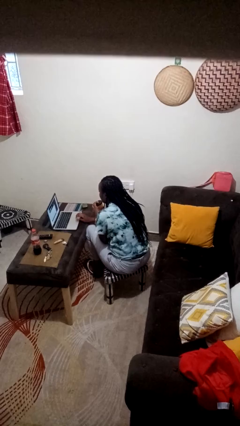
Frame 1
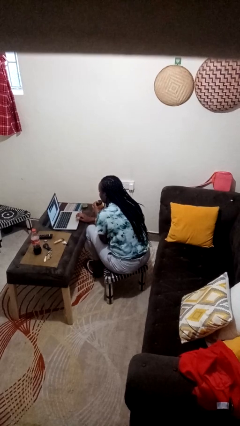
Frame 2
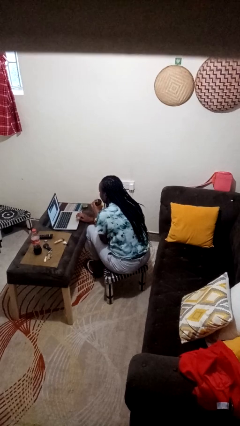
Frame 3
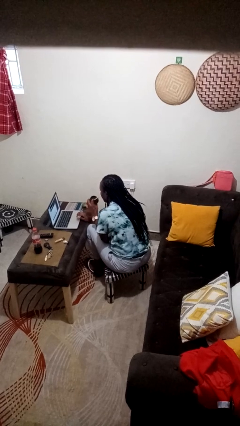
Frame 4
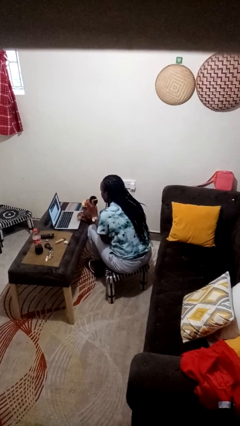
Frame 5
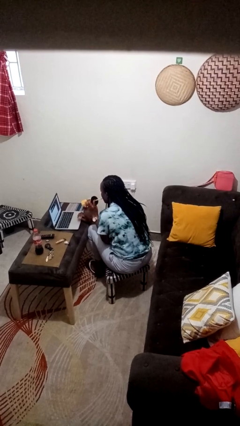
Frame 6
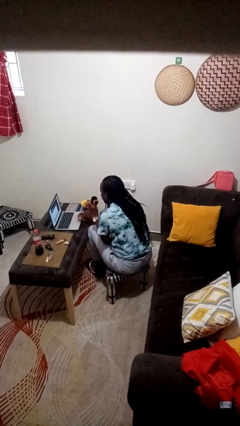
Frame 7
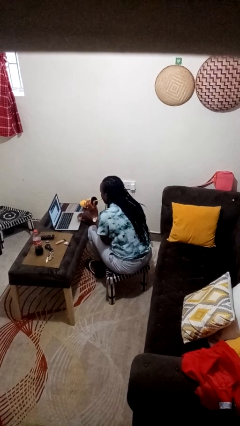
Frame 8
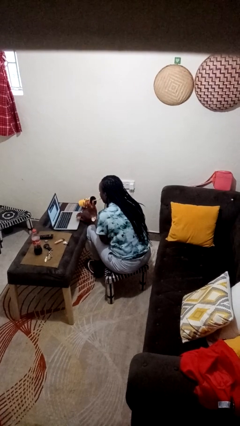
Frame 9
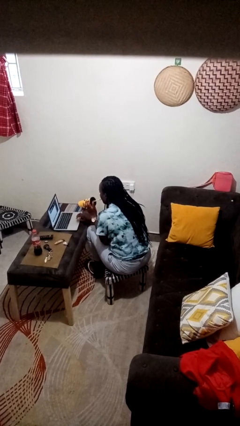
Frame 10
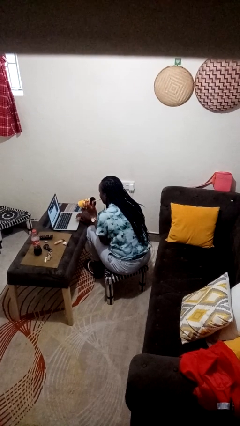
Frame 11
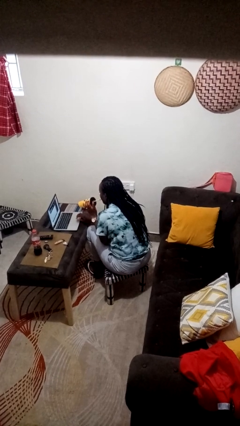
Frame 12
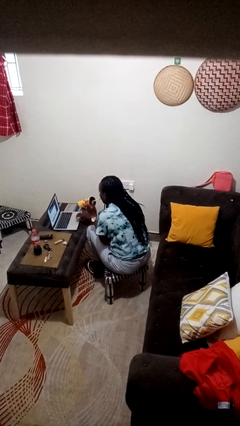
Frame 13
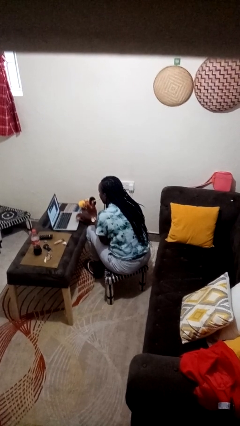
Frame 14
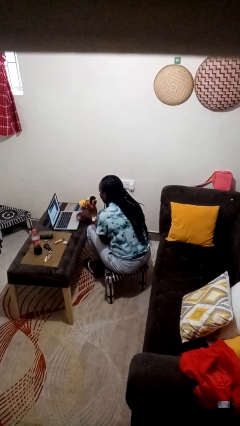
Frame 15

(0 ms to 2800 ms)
person drinks from straw

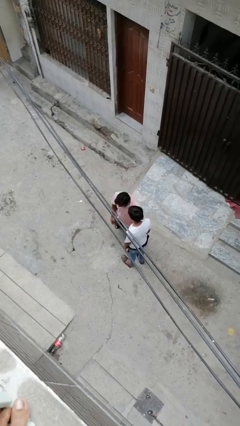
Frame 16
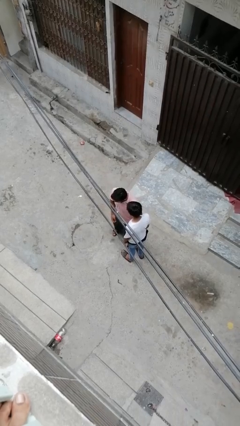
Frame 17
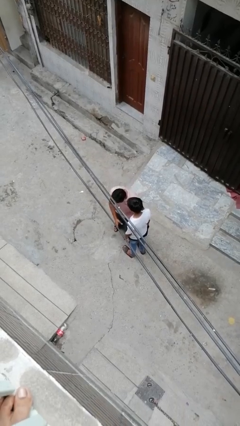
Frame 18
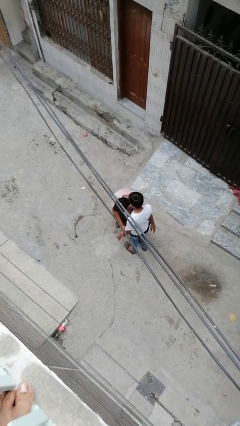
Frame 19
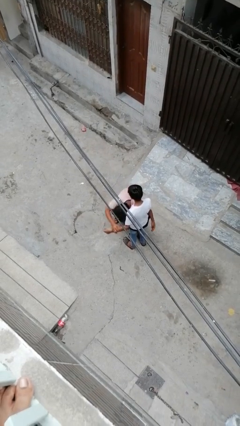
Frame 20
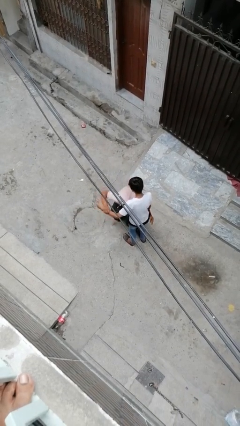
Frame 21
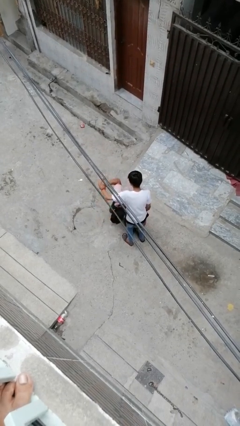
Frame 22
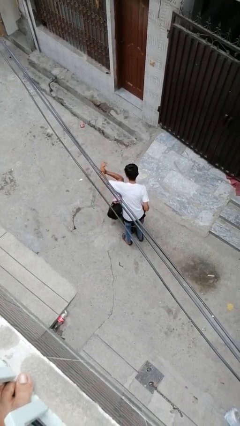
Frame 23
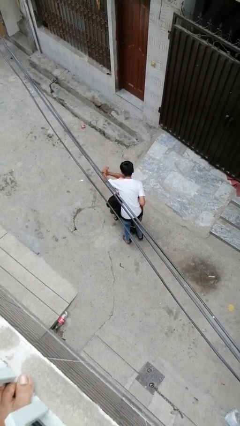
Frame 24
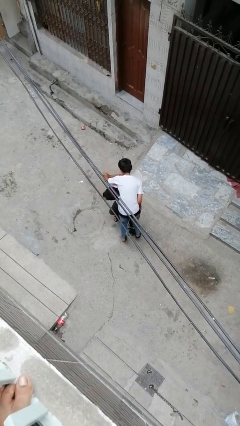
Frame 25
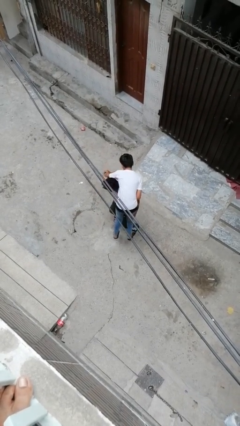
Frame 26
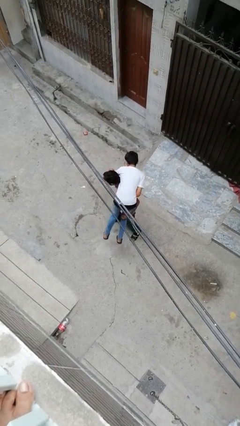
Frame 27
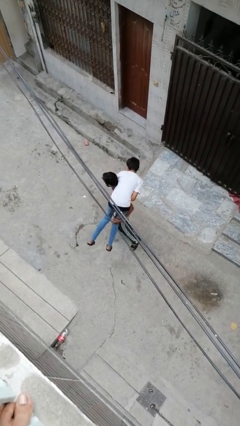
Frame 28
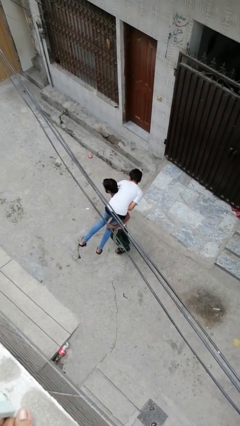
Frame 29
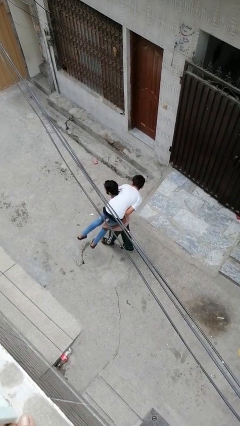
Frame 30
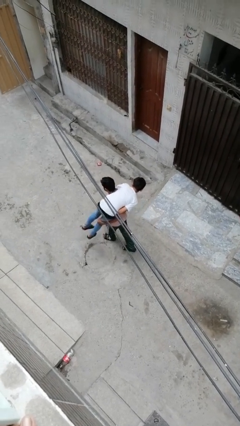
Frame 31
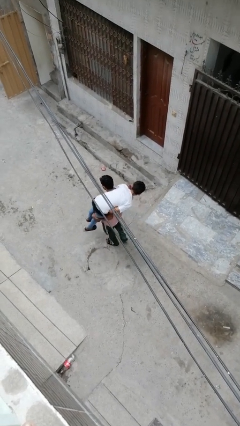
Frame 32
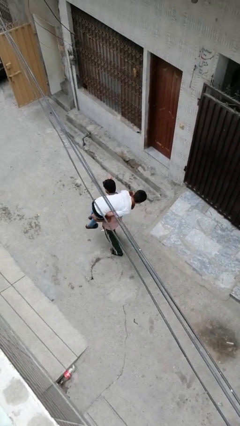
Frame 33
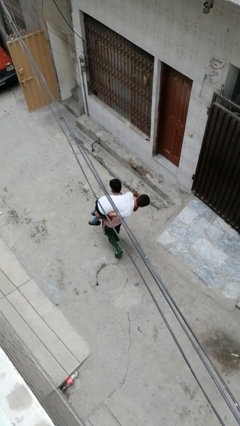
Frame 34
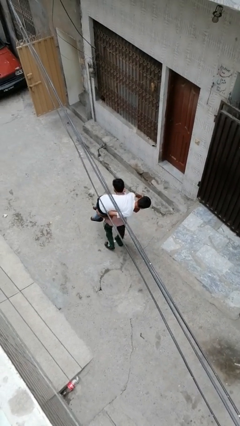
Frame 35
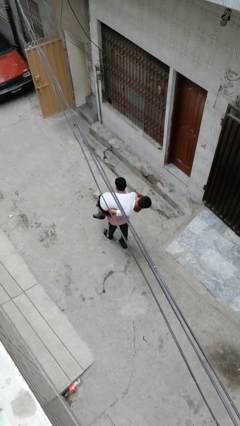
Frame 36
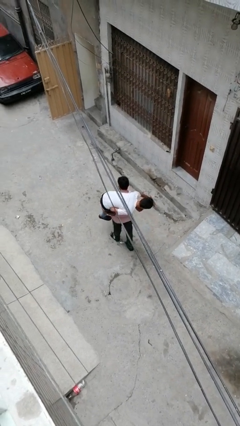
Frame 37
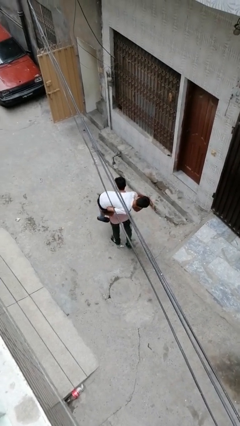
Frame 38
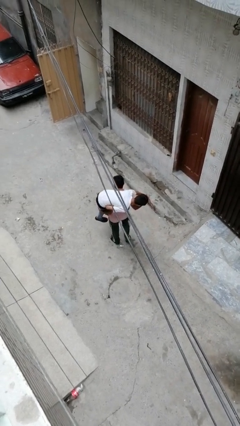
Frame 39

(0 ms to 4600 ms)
person carries person over shoulder

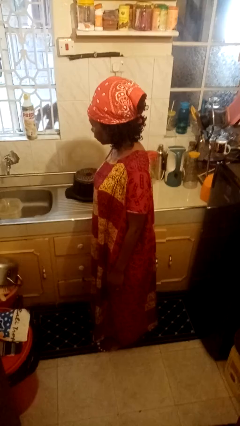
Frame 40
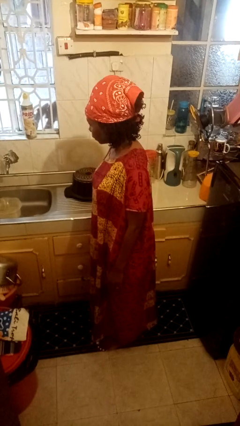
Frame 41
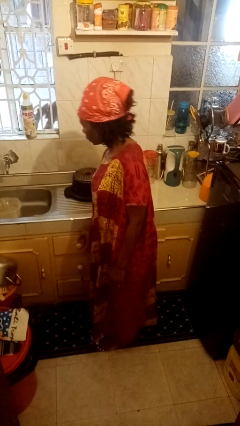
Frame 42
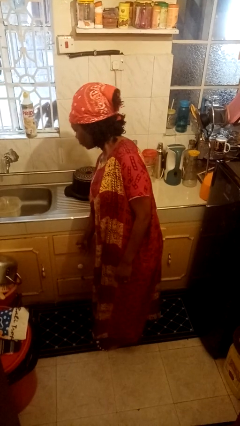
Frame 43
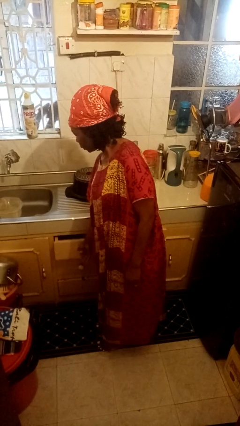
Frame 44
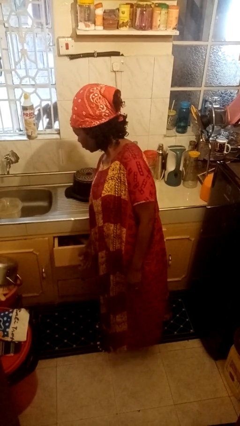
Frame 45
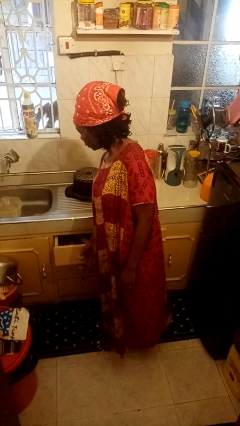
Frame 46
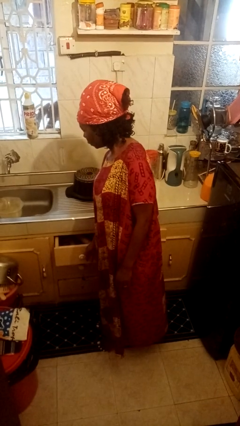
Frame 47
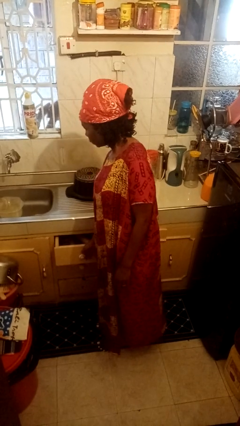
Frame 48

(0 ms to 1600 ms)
person opens kitchen drawer

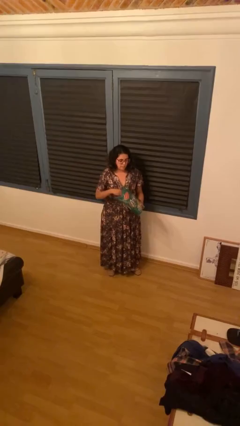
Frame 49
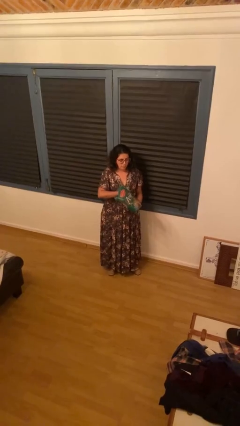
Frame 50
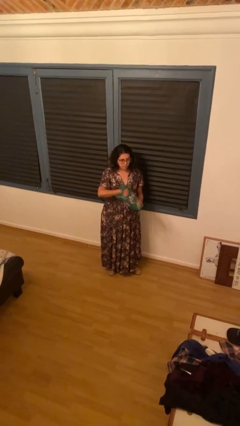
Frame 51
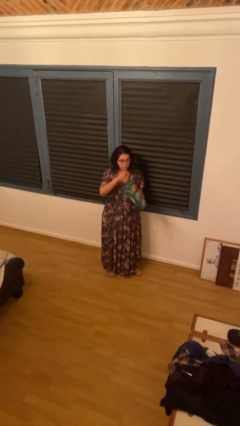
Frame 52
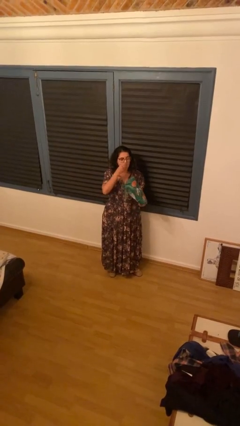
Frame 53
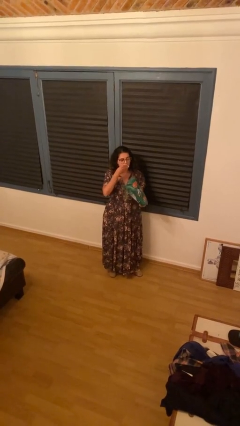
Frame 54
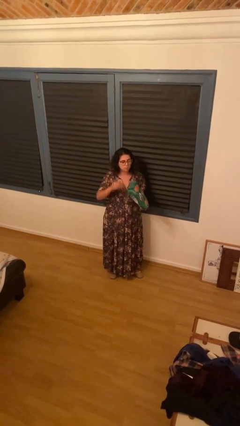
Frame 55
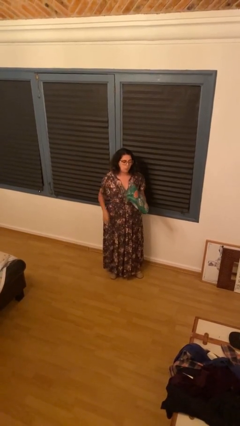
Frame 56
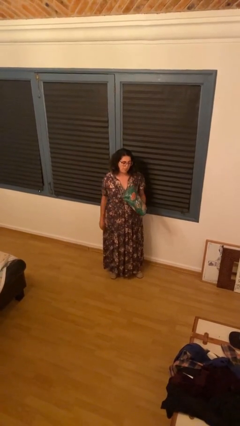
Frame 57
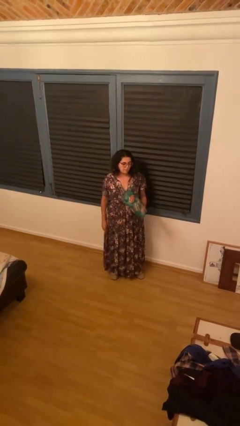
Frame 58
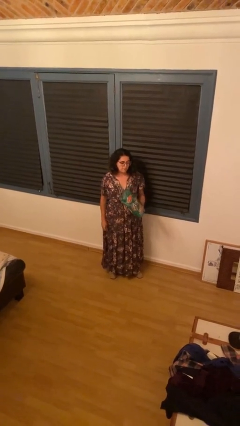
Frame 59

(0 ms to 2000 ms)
person eats snack from bag

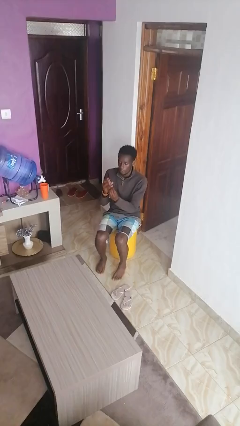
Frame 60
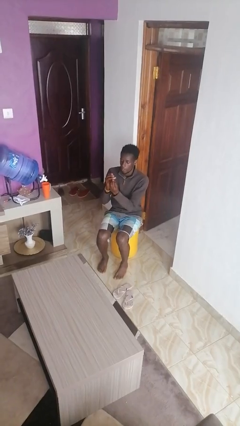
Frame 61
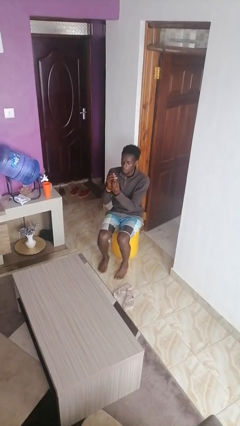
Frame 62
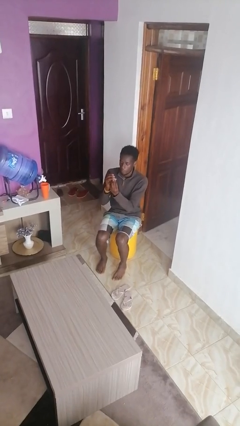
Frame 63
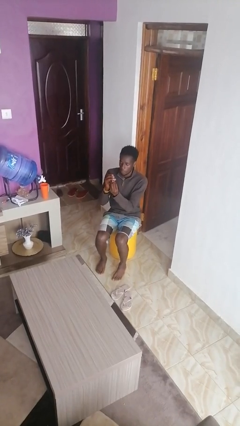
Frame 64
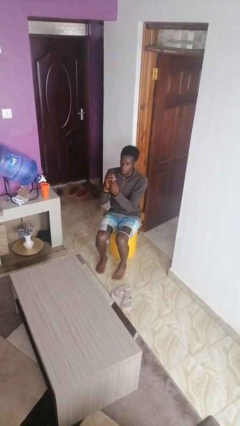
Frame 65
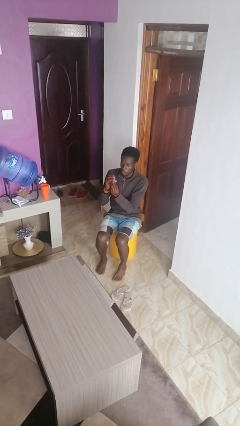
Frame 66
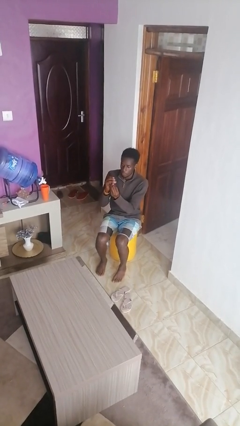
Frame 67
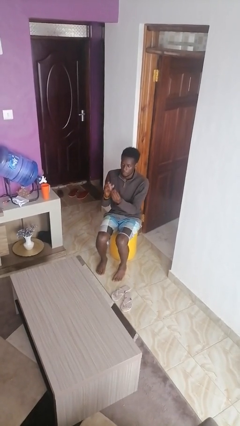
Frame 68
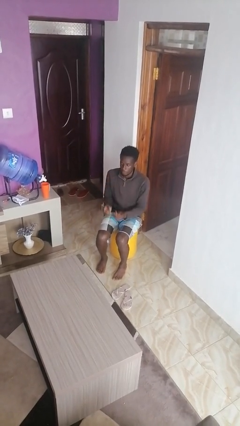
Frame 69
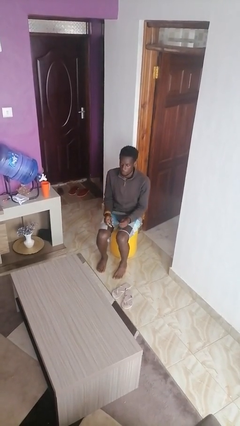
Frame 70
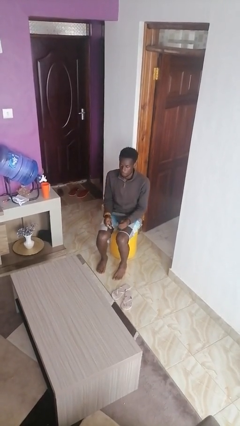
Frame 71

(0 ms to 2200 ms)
person clips fingernails

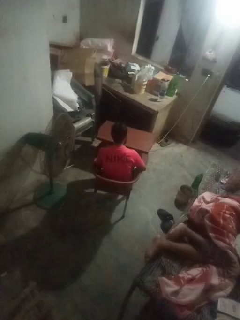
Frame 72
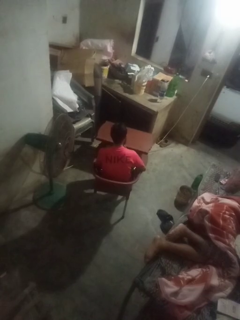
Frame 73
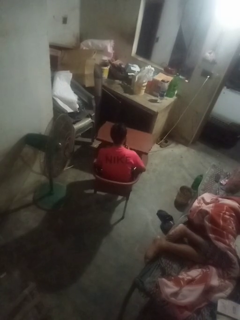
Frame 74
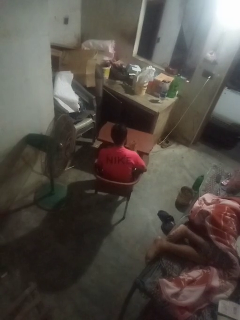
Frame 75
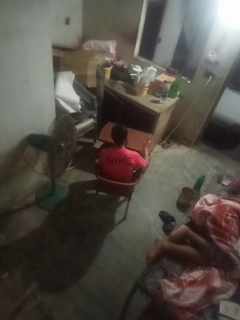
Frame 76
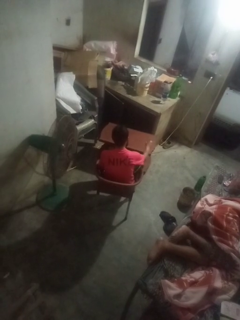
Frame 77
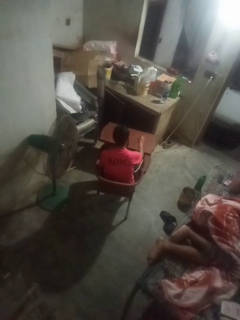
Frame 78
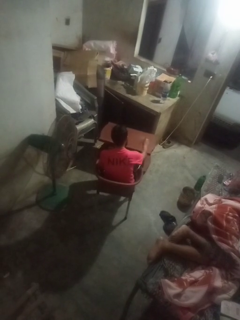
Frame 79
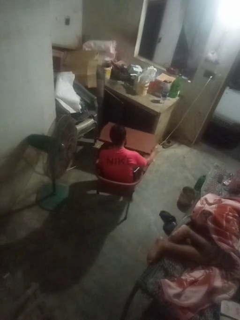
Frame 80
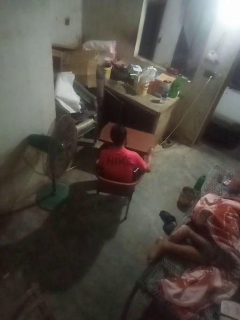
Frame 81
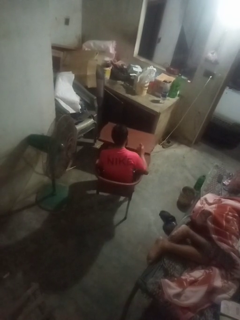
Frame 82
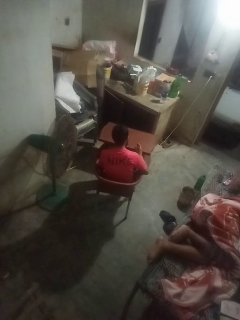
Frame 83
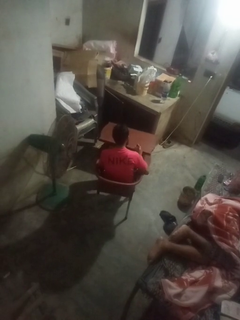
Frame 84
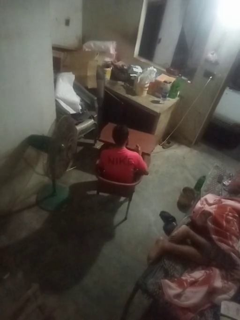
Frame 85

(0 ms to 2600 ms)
person sprays from bottle

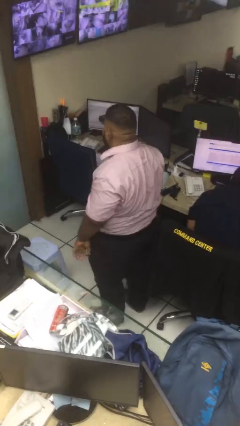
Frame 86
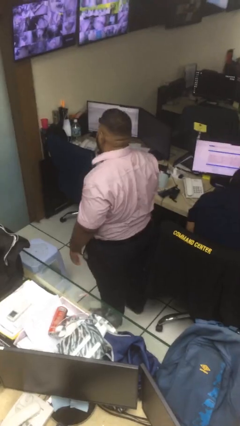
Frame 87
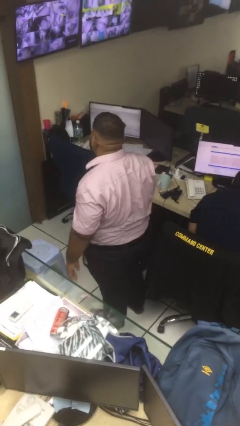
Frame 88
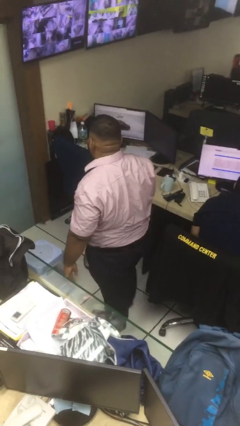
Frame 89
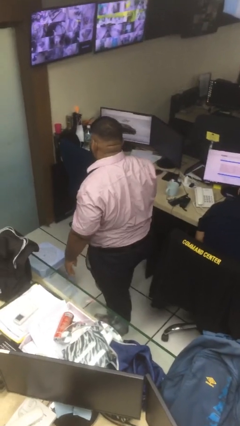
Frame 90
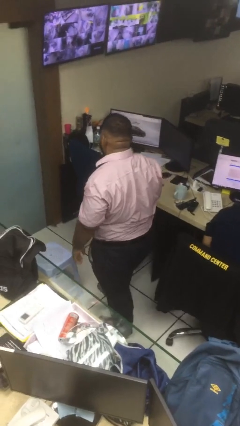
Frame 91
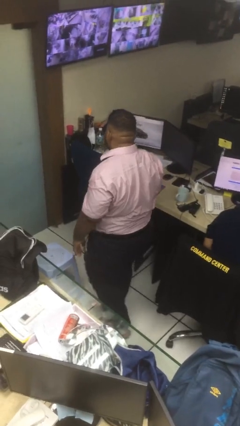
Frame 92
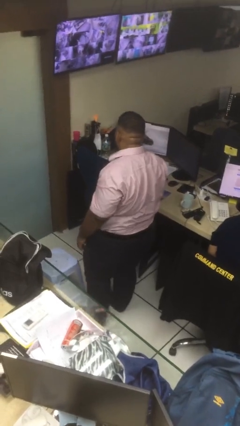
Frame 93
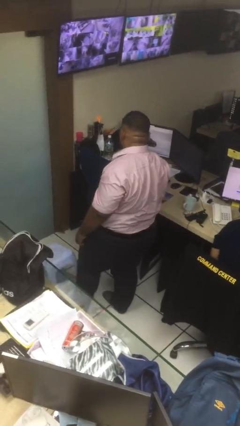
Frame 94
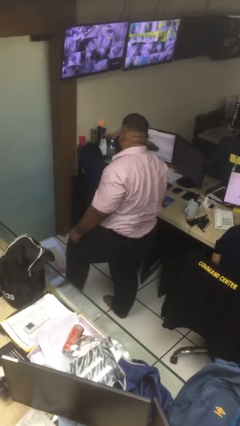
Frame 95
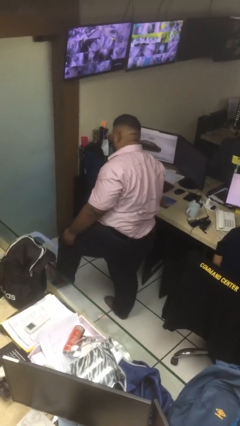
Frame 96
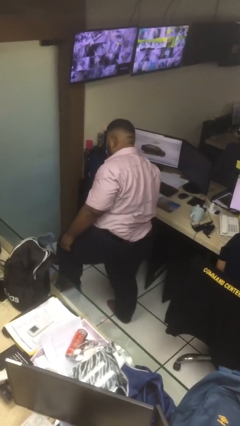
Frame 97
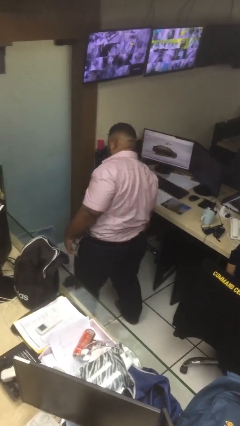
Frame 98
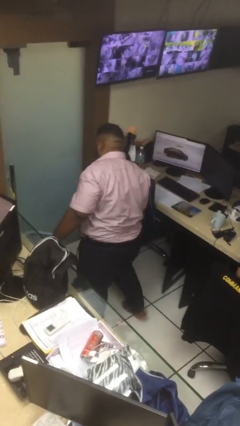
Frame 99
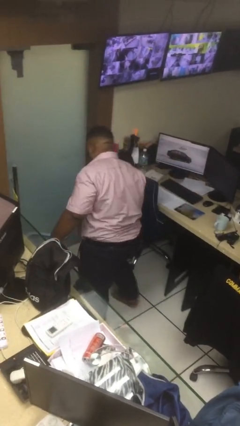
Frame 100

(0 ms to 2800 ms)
person knocks over furniture
